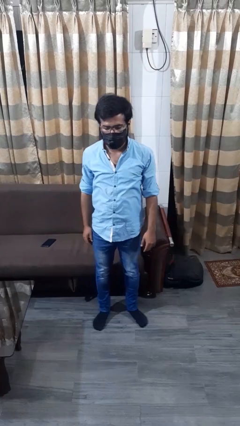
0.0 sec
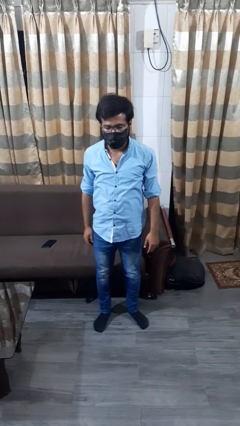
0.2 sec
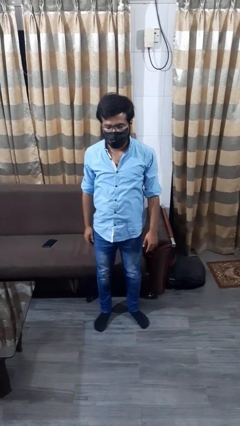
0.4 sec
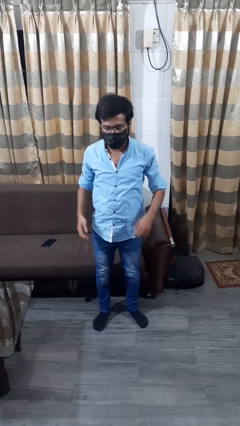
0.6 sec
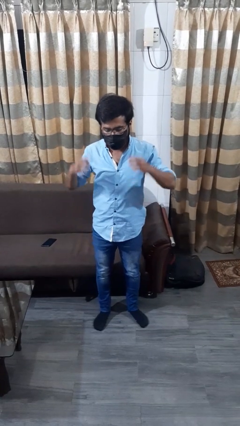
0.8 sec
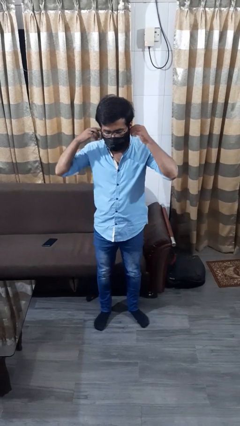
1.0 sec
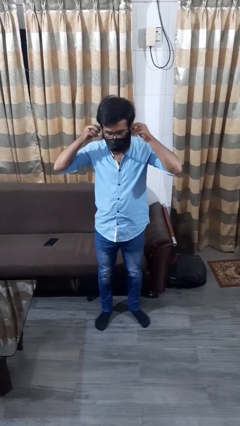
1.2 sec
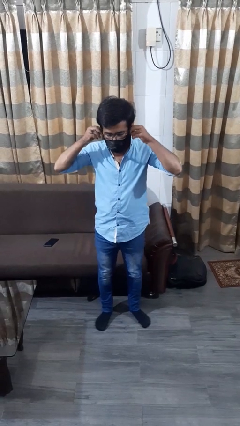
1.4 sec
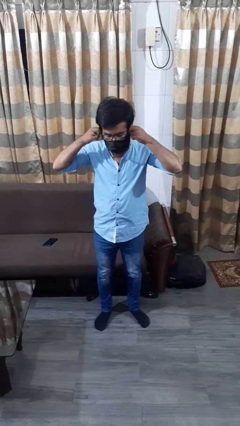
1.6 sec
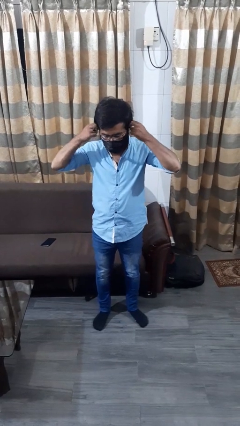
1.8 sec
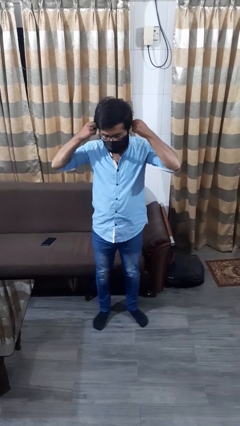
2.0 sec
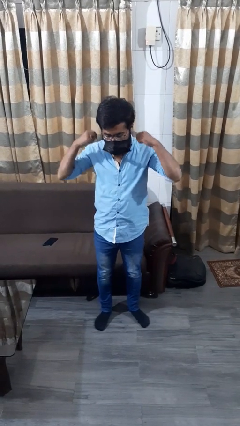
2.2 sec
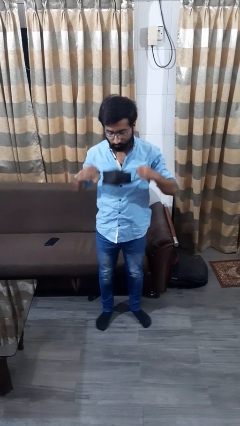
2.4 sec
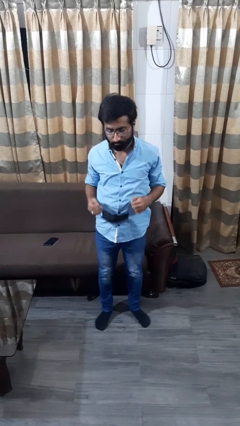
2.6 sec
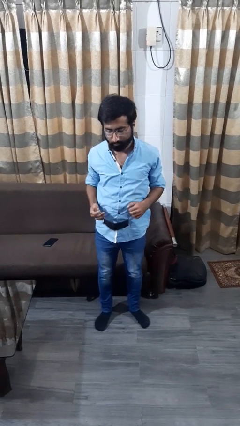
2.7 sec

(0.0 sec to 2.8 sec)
person takes off facemask

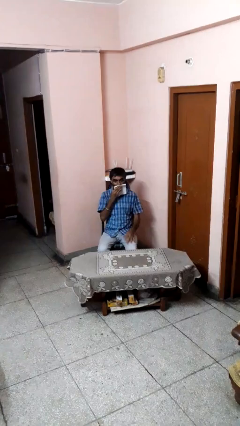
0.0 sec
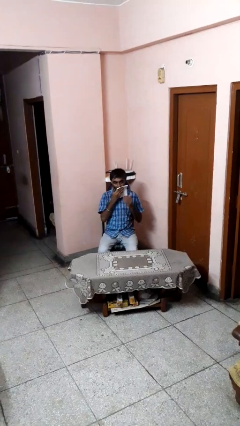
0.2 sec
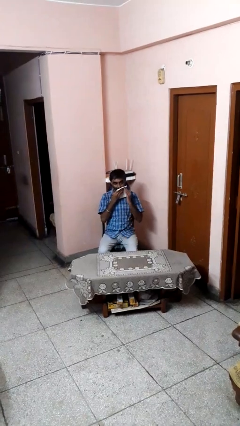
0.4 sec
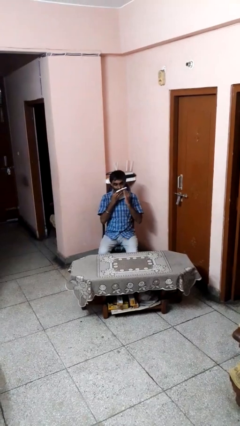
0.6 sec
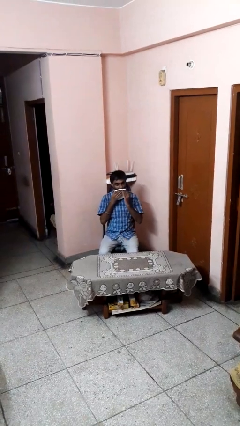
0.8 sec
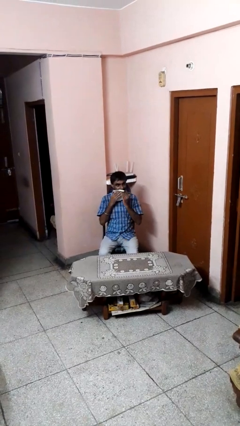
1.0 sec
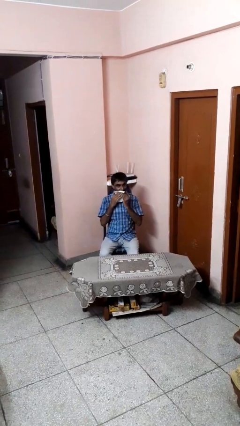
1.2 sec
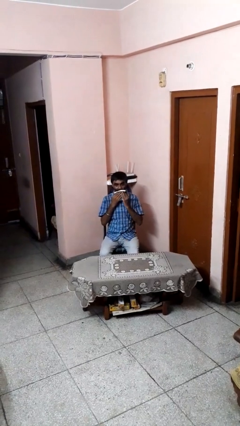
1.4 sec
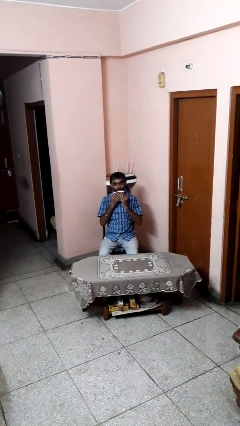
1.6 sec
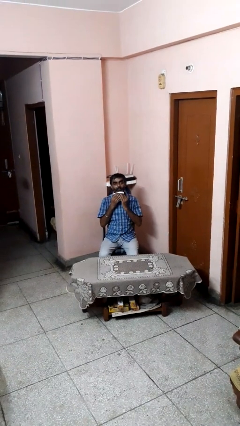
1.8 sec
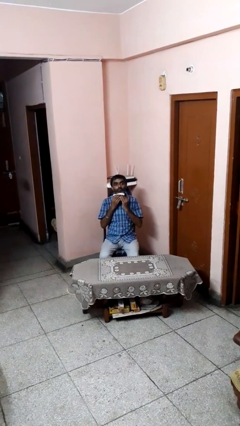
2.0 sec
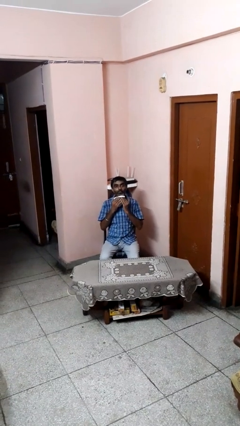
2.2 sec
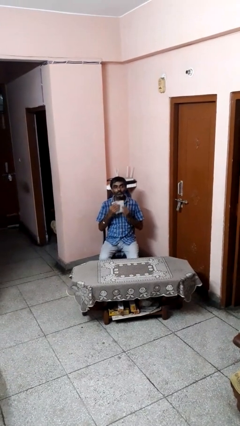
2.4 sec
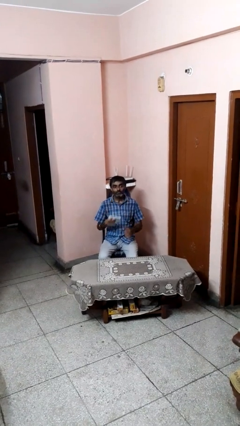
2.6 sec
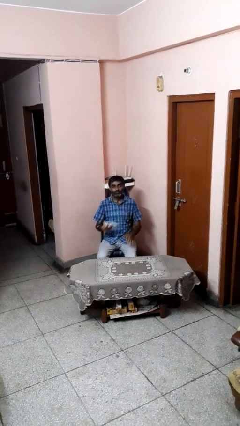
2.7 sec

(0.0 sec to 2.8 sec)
person wipes mouth with napkin

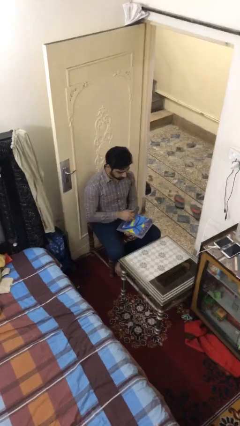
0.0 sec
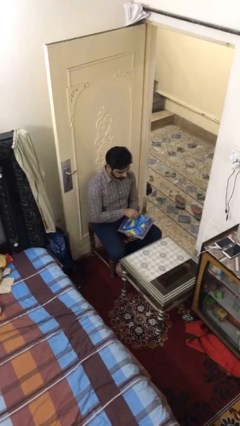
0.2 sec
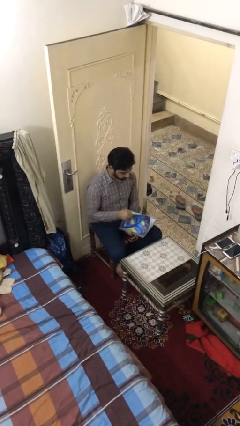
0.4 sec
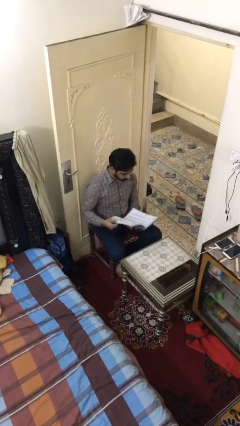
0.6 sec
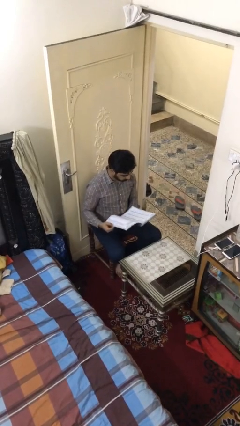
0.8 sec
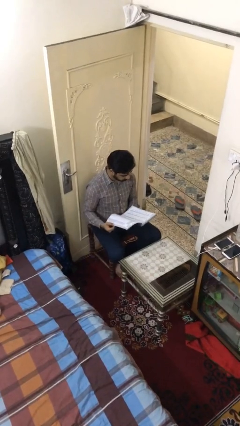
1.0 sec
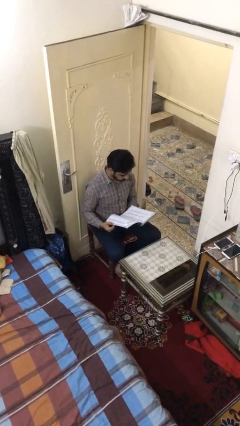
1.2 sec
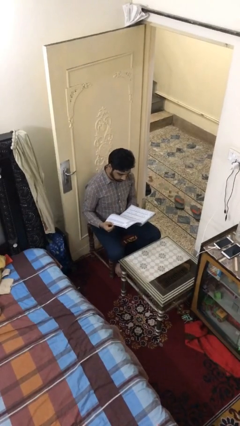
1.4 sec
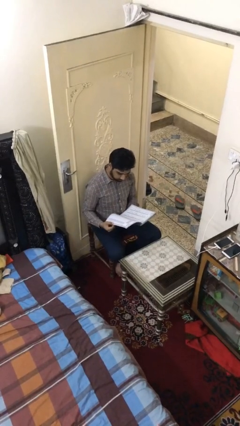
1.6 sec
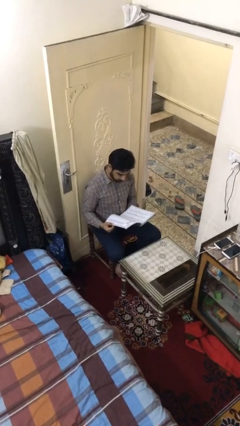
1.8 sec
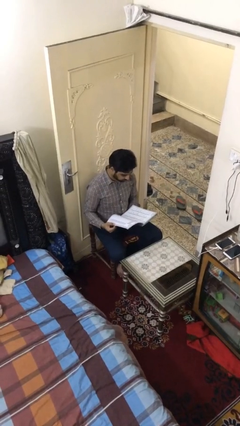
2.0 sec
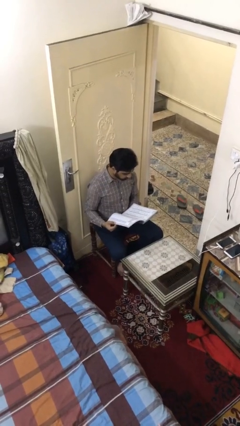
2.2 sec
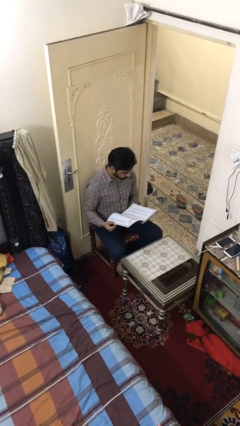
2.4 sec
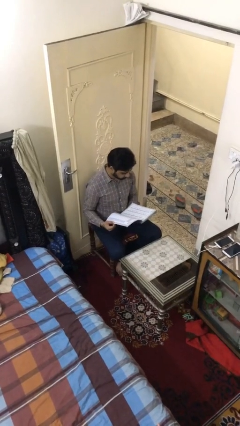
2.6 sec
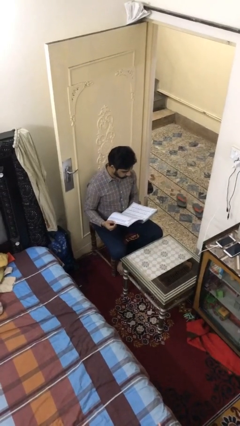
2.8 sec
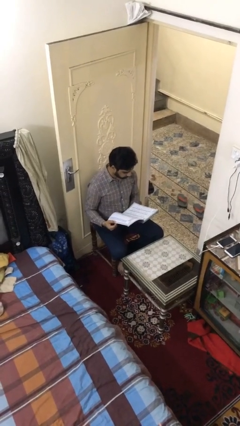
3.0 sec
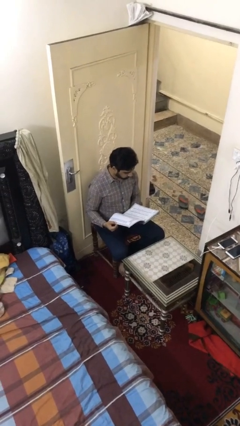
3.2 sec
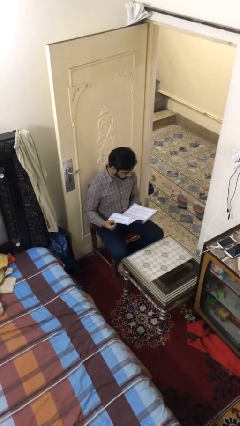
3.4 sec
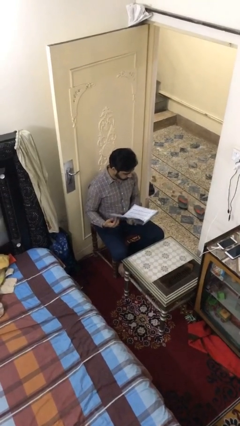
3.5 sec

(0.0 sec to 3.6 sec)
person reads document

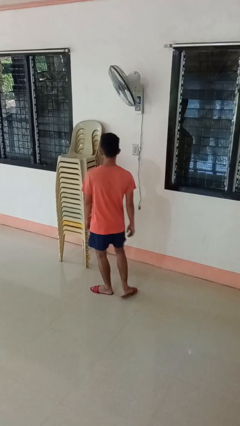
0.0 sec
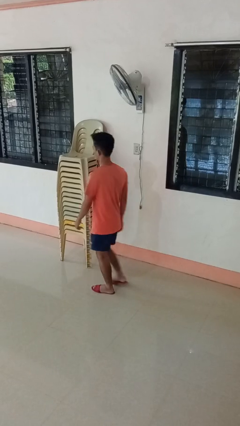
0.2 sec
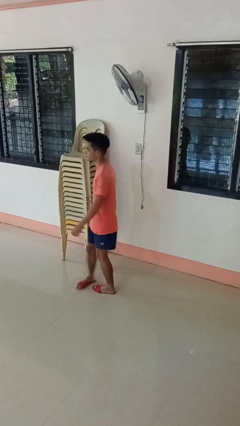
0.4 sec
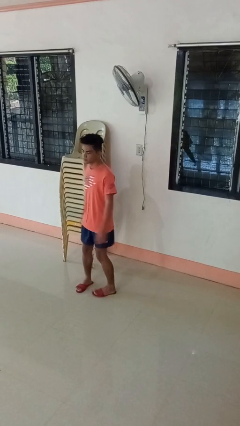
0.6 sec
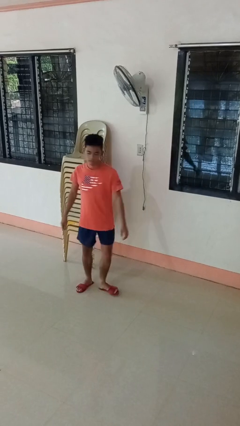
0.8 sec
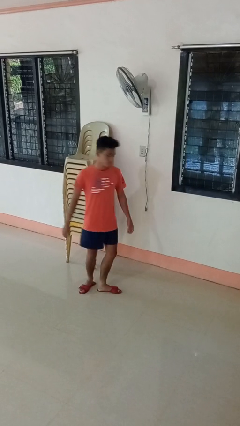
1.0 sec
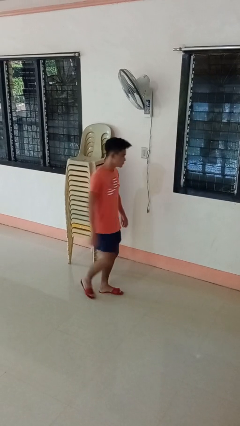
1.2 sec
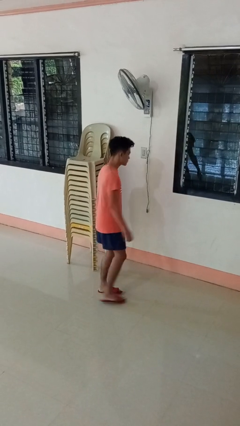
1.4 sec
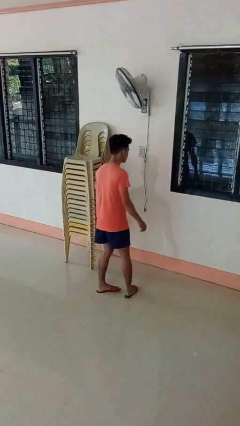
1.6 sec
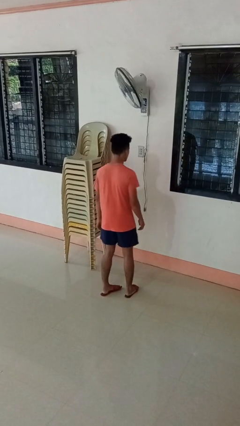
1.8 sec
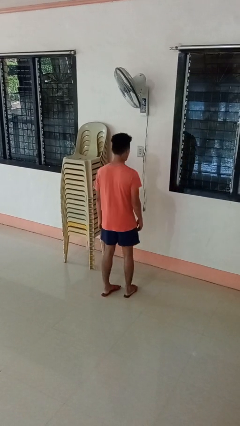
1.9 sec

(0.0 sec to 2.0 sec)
person twirls

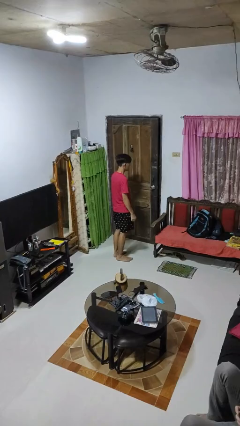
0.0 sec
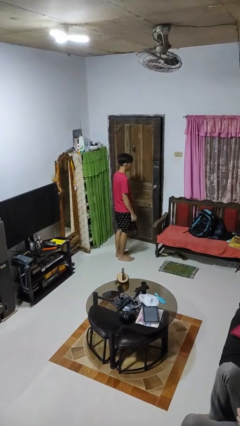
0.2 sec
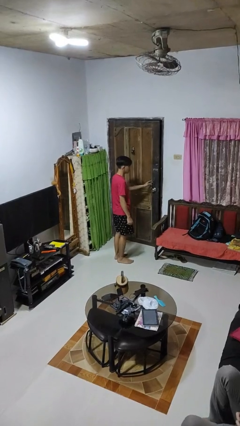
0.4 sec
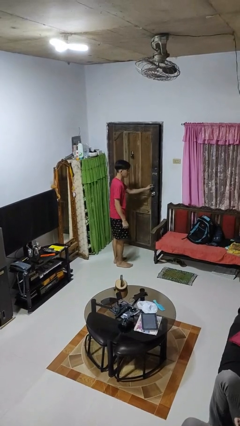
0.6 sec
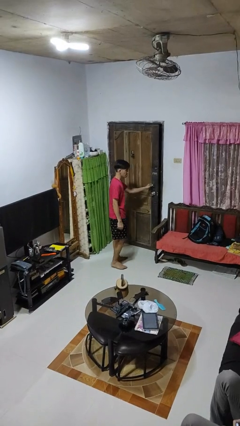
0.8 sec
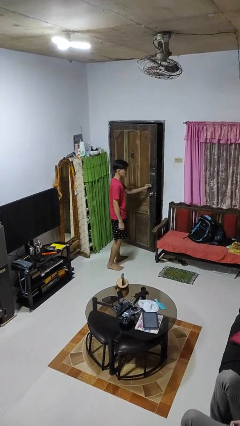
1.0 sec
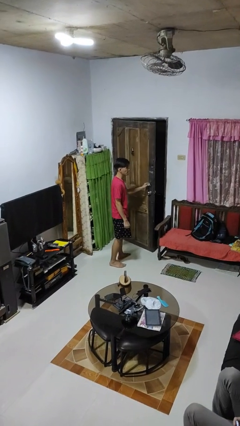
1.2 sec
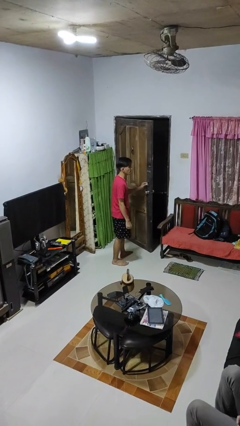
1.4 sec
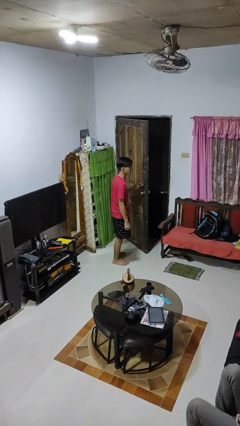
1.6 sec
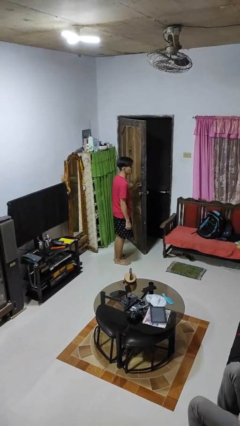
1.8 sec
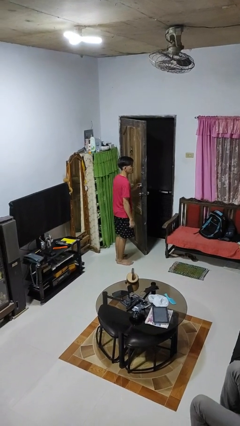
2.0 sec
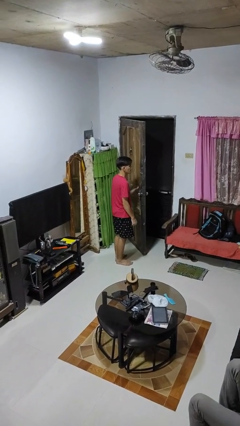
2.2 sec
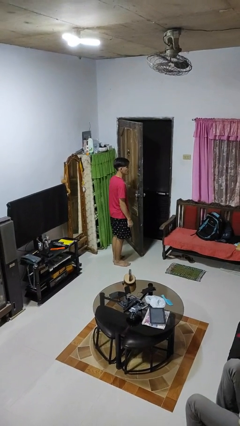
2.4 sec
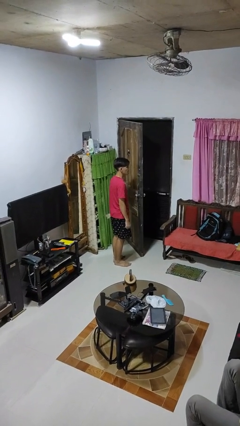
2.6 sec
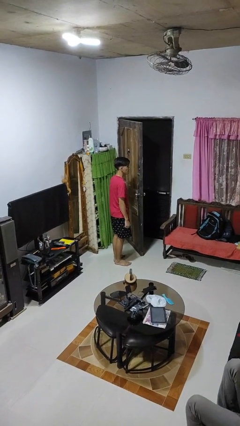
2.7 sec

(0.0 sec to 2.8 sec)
person opens facility door

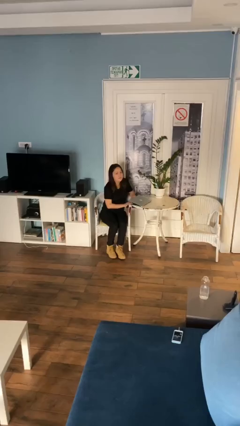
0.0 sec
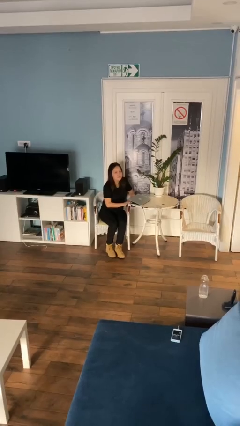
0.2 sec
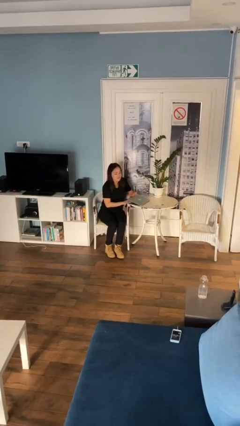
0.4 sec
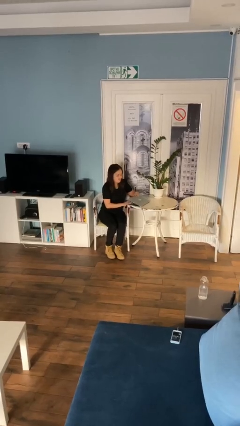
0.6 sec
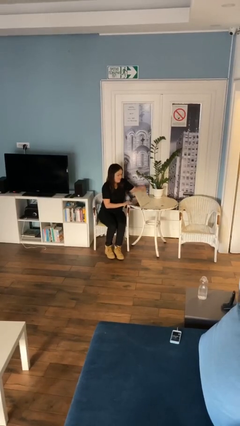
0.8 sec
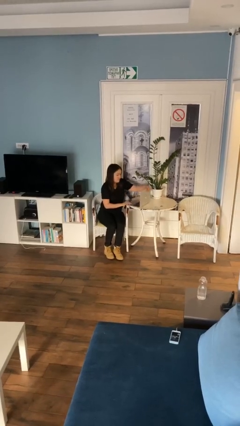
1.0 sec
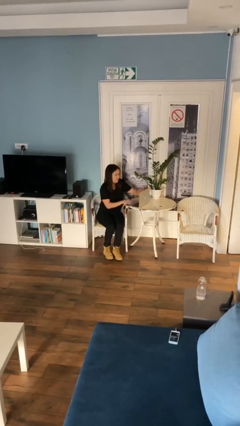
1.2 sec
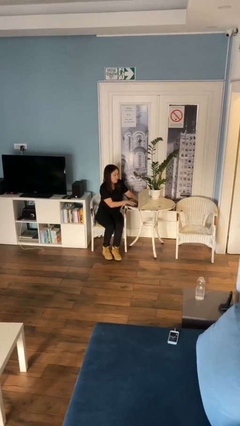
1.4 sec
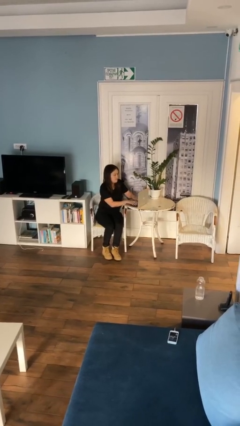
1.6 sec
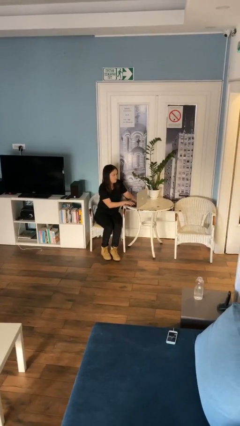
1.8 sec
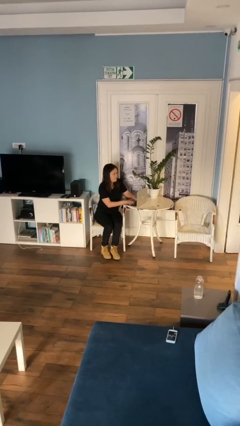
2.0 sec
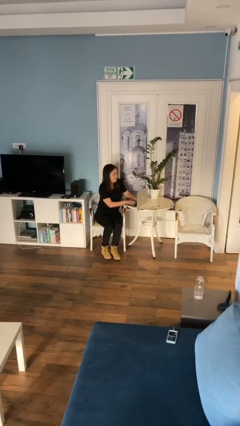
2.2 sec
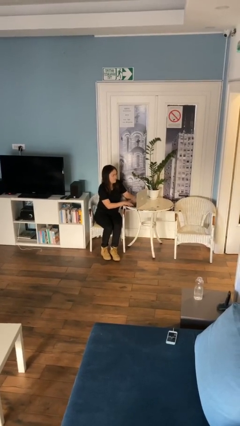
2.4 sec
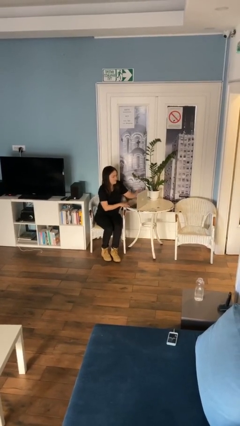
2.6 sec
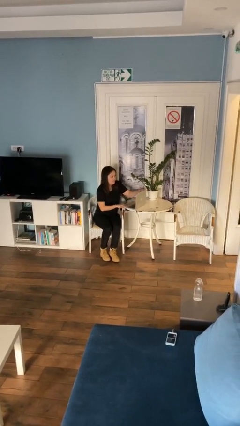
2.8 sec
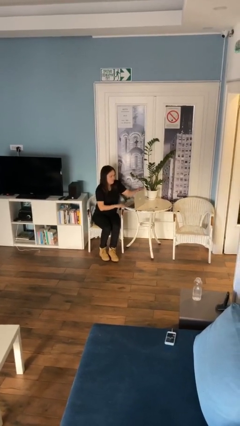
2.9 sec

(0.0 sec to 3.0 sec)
person interacts with laptop

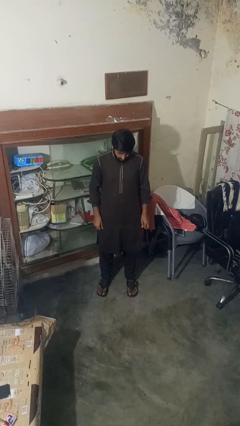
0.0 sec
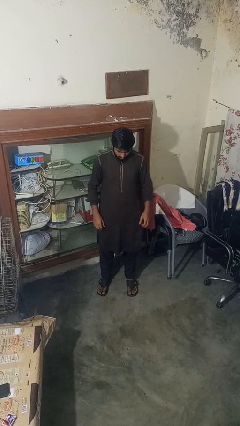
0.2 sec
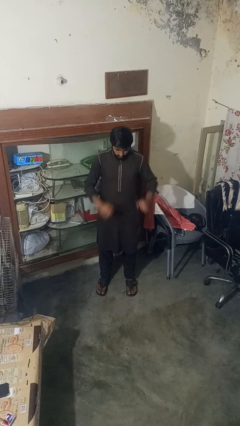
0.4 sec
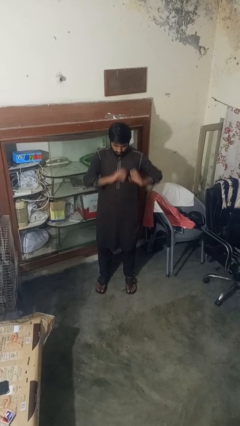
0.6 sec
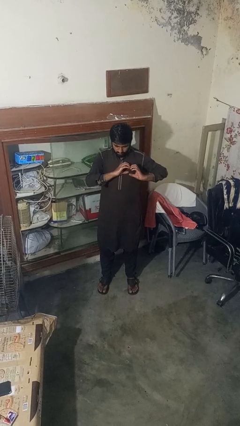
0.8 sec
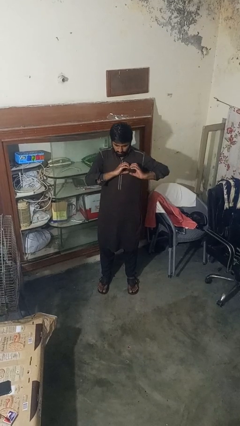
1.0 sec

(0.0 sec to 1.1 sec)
person gestures heart
